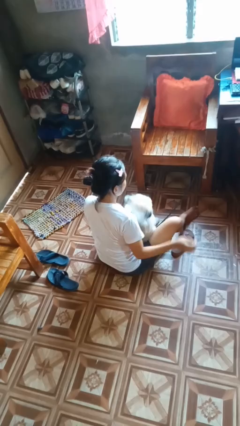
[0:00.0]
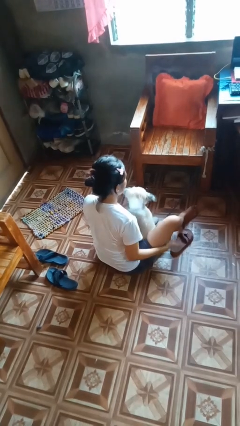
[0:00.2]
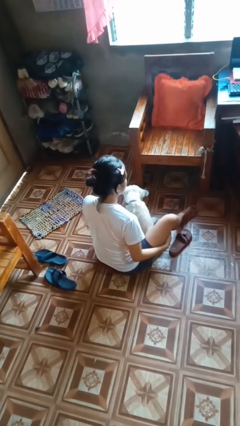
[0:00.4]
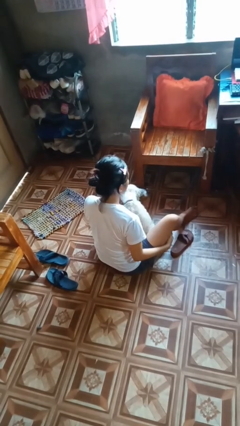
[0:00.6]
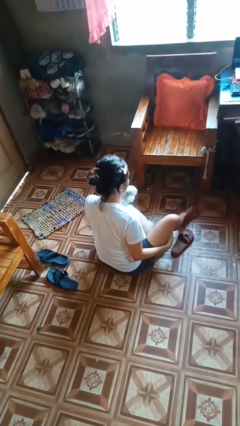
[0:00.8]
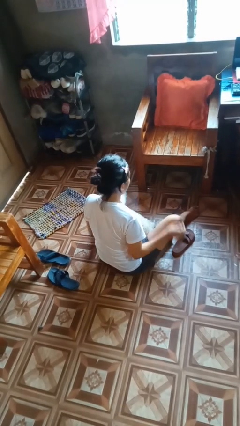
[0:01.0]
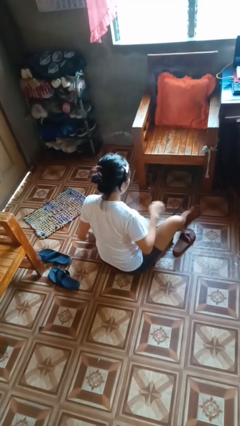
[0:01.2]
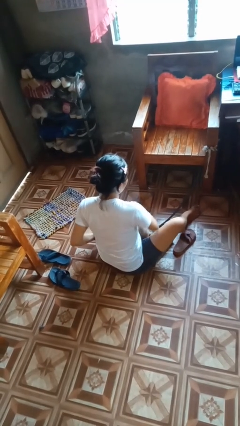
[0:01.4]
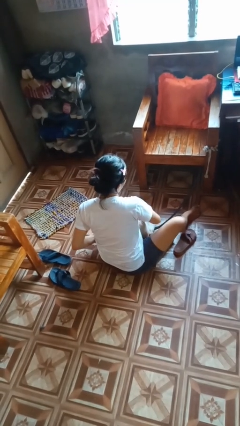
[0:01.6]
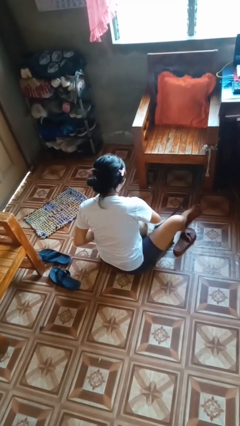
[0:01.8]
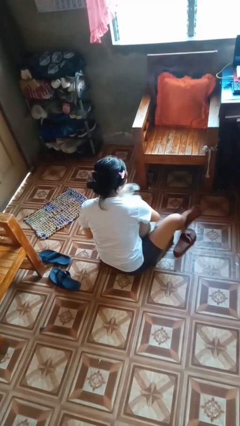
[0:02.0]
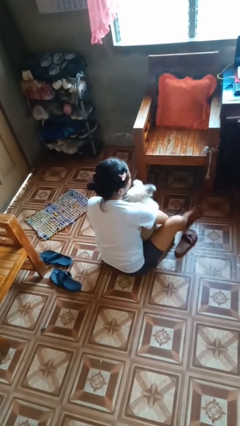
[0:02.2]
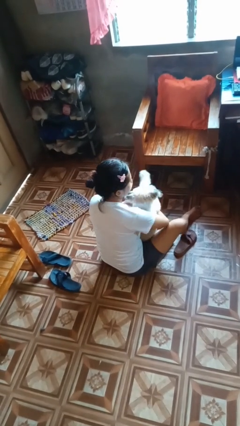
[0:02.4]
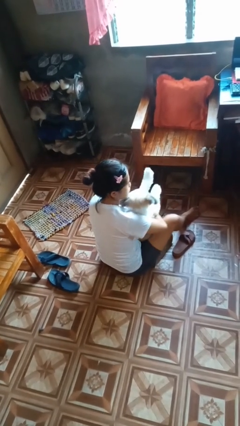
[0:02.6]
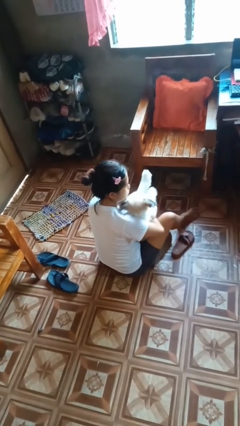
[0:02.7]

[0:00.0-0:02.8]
person hugs dog

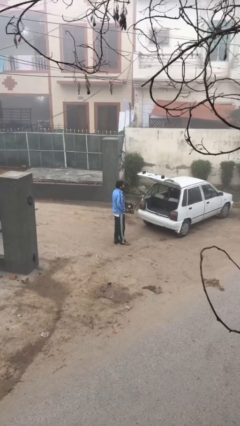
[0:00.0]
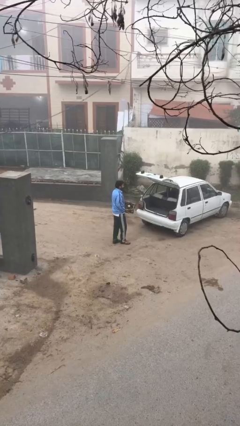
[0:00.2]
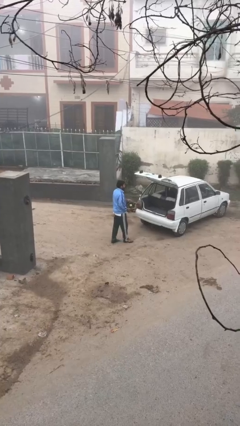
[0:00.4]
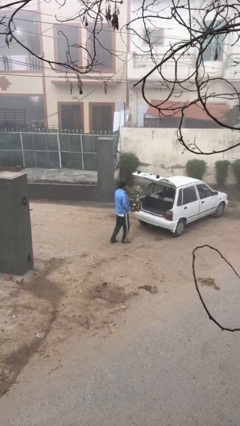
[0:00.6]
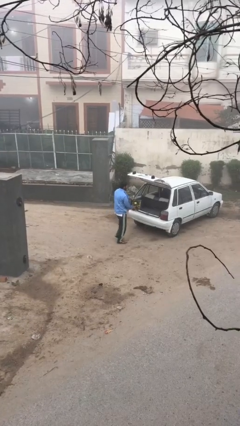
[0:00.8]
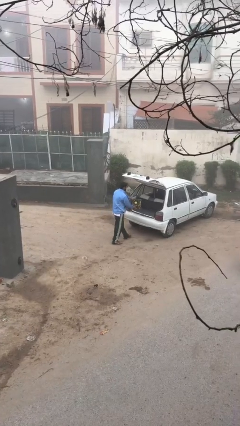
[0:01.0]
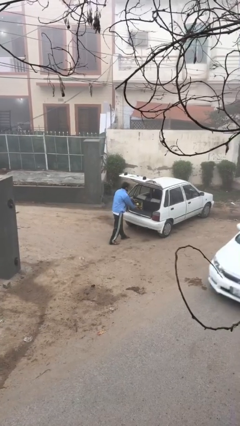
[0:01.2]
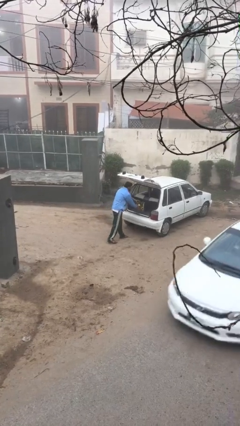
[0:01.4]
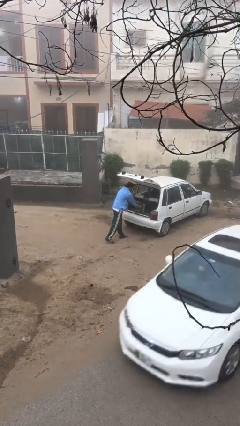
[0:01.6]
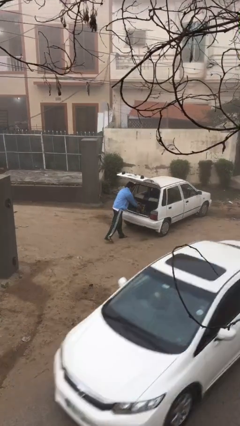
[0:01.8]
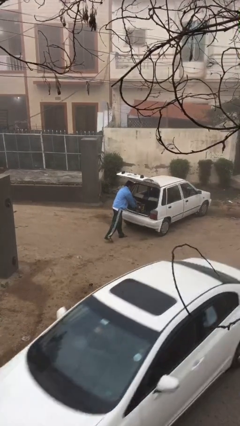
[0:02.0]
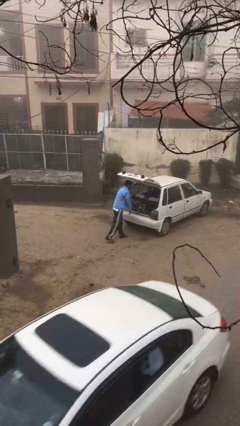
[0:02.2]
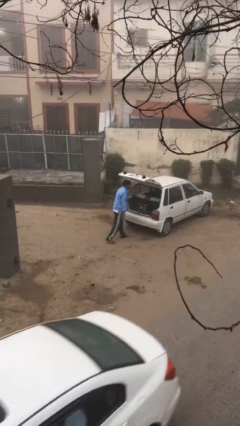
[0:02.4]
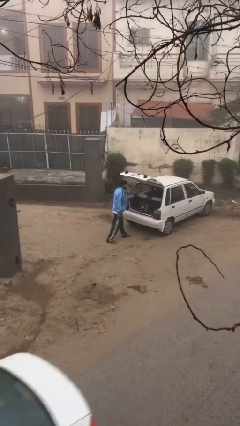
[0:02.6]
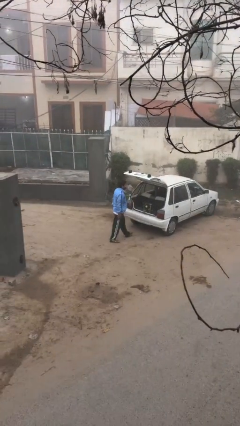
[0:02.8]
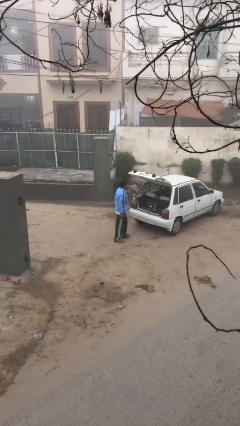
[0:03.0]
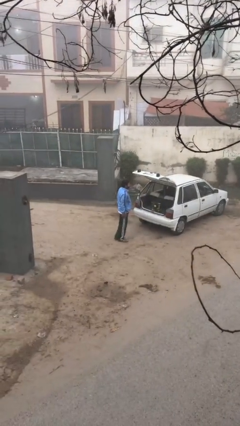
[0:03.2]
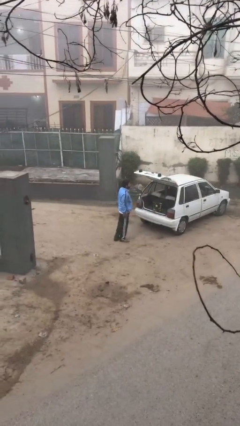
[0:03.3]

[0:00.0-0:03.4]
person loads car

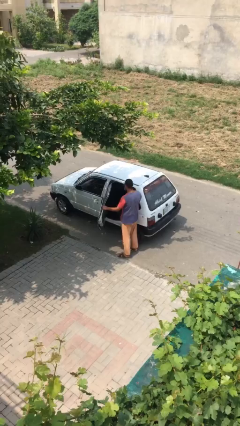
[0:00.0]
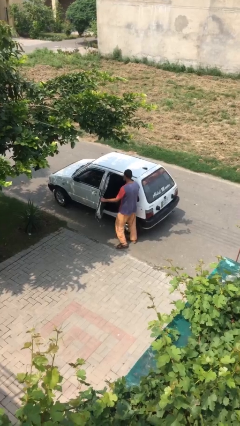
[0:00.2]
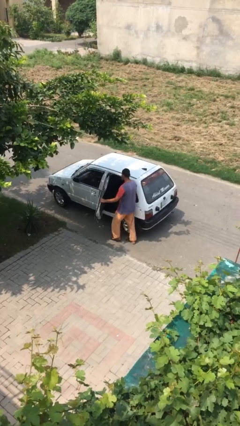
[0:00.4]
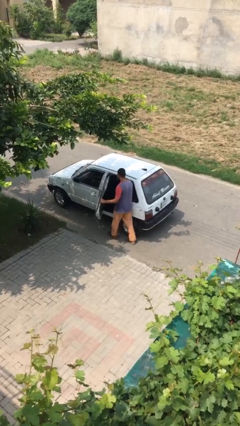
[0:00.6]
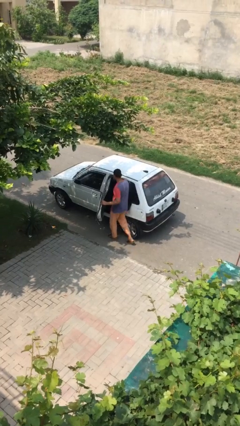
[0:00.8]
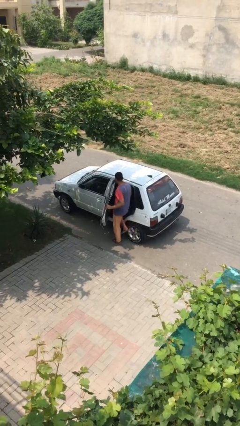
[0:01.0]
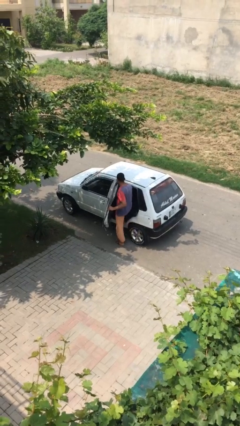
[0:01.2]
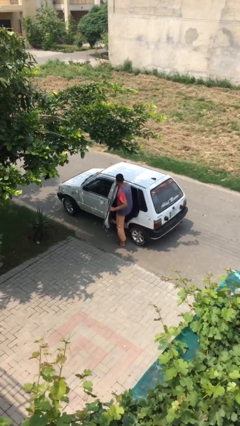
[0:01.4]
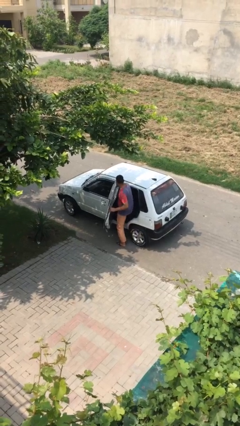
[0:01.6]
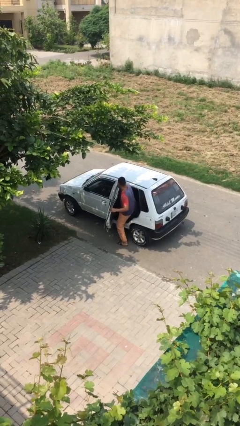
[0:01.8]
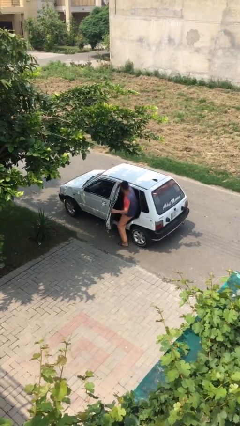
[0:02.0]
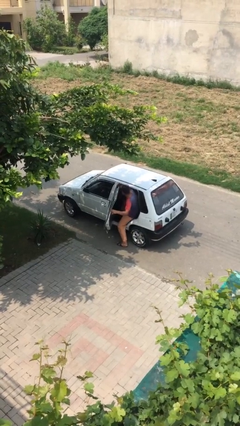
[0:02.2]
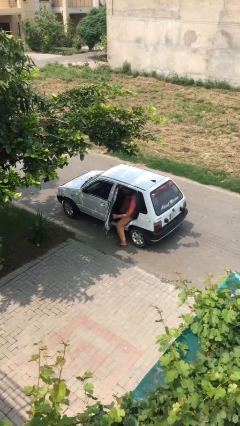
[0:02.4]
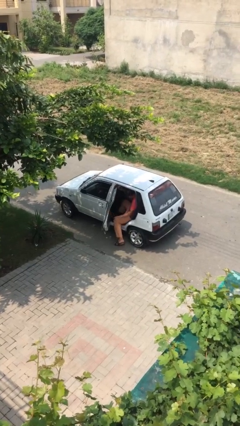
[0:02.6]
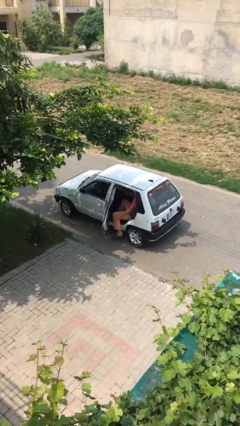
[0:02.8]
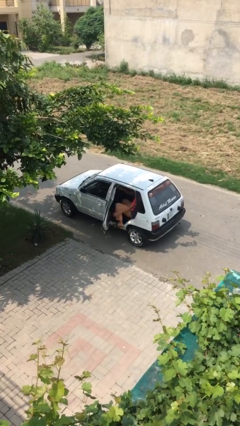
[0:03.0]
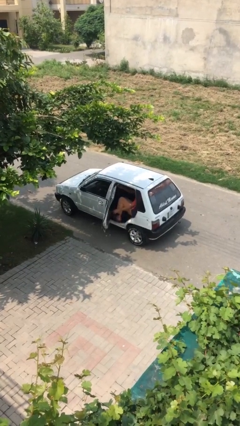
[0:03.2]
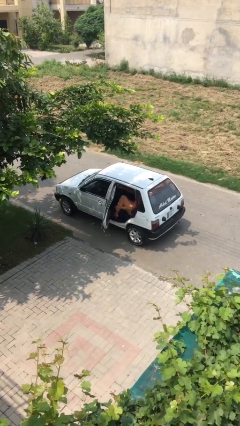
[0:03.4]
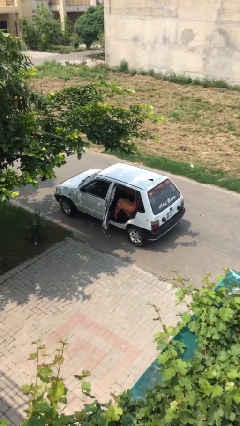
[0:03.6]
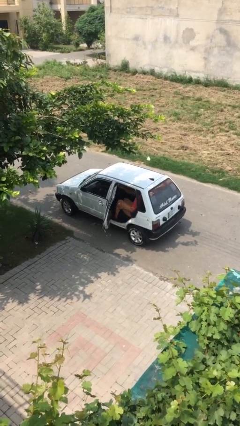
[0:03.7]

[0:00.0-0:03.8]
person enters car

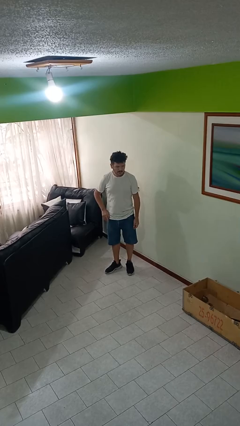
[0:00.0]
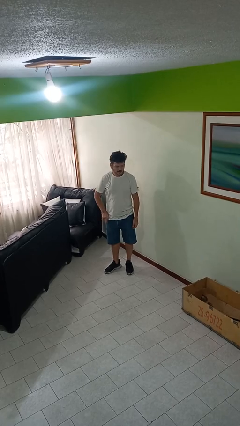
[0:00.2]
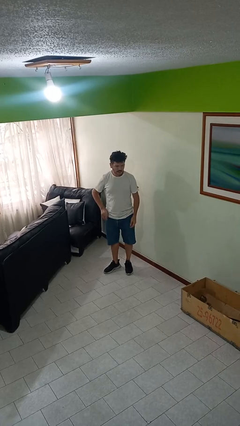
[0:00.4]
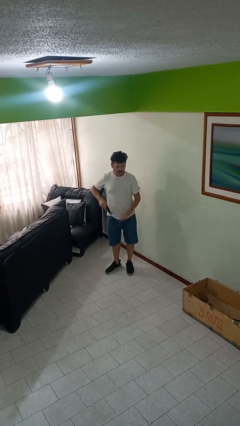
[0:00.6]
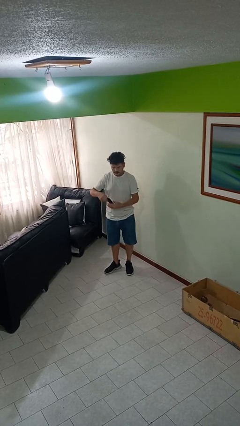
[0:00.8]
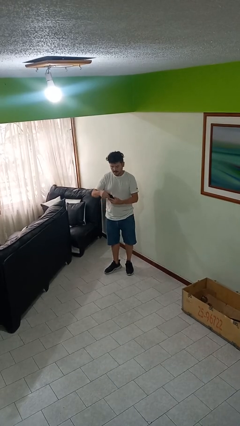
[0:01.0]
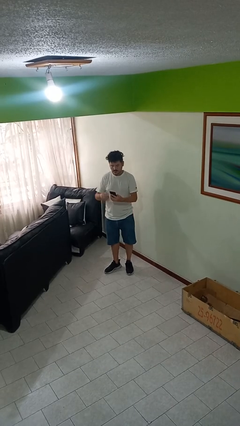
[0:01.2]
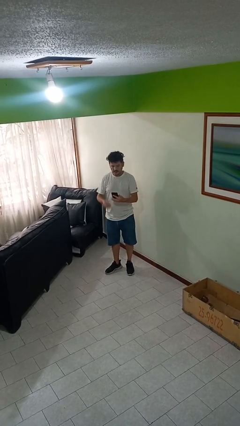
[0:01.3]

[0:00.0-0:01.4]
person takes phone from pocket

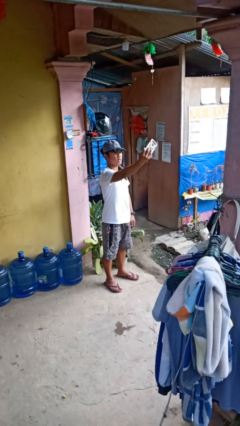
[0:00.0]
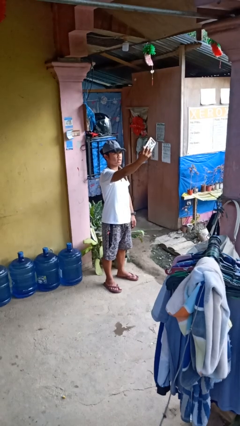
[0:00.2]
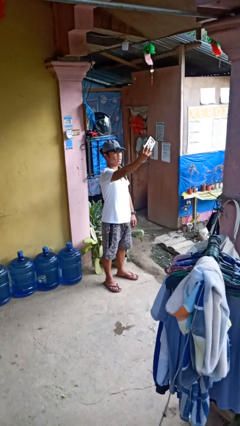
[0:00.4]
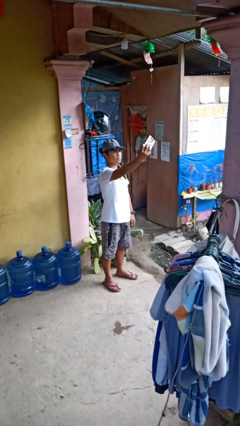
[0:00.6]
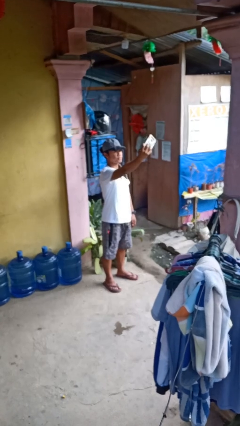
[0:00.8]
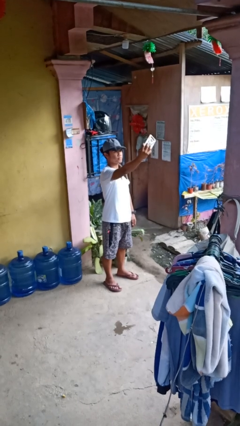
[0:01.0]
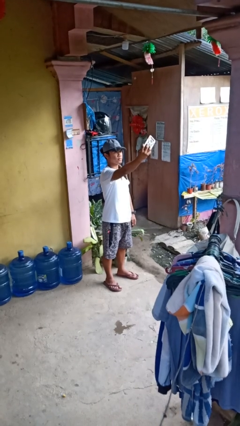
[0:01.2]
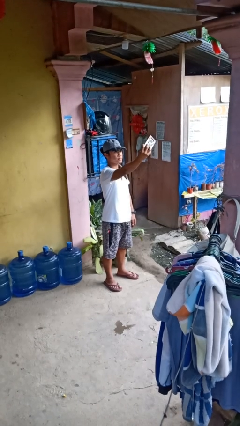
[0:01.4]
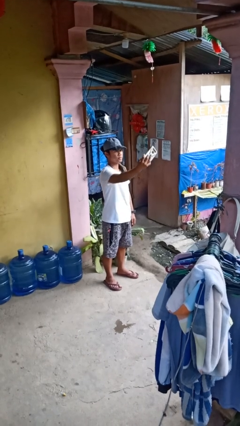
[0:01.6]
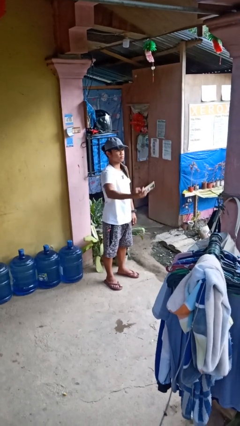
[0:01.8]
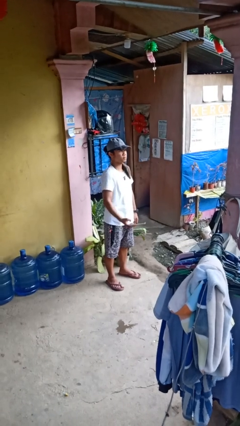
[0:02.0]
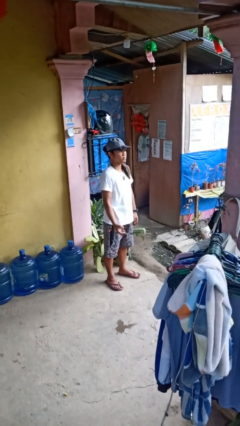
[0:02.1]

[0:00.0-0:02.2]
person takes selfie

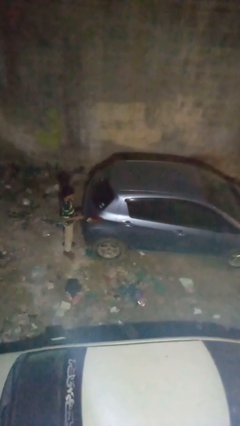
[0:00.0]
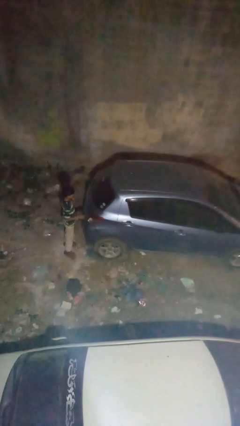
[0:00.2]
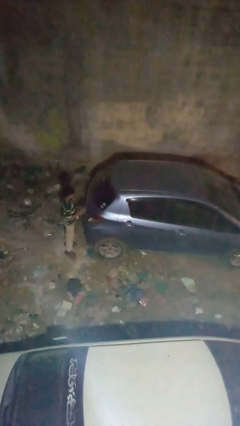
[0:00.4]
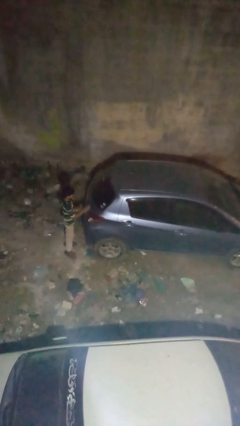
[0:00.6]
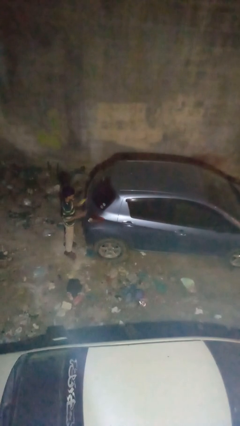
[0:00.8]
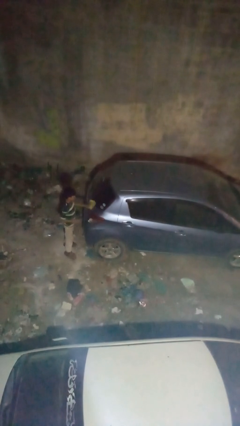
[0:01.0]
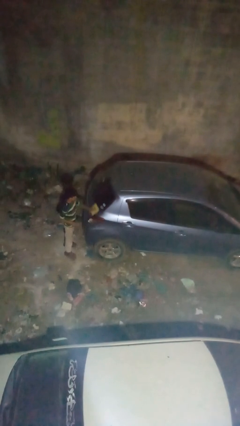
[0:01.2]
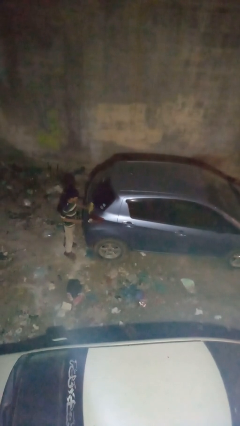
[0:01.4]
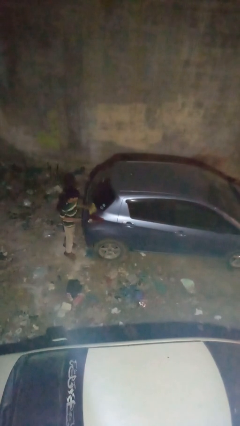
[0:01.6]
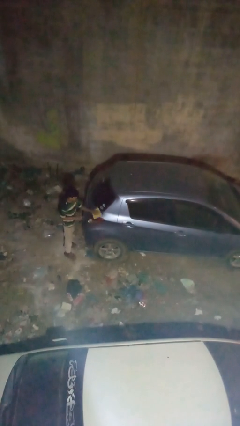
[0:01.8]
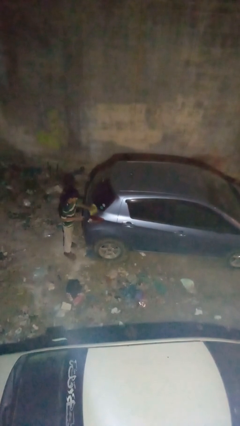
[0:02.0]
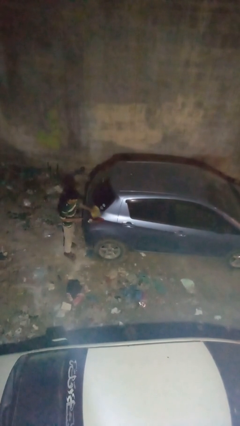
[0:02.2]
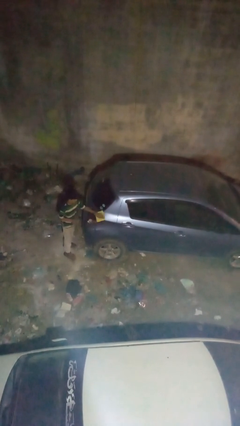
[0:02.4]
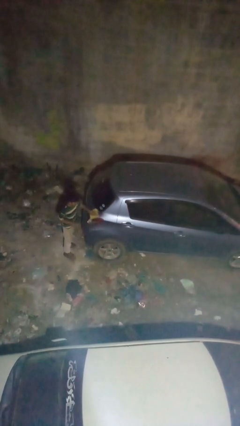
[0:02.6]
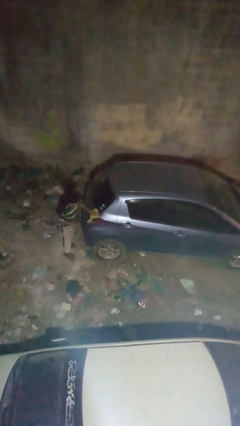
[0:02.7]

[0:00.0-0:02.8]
person polishes car with rag

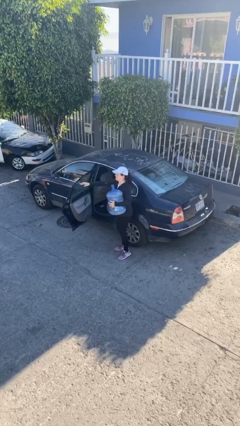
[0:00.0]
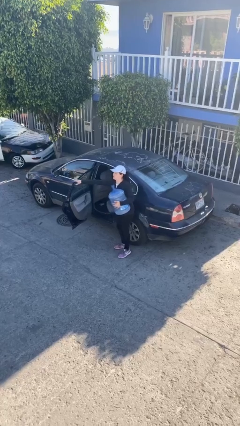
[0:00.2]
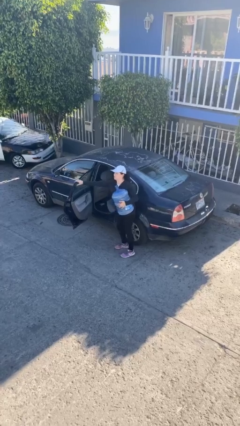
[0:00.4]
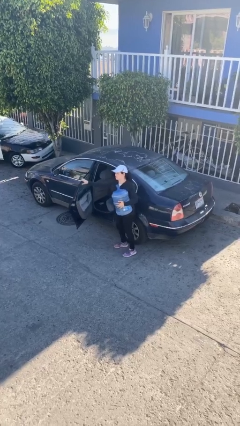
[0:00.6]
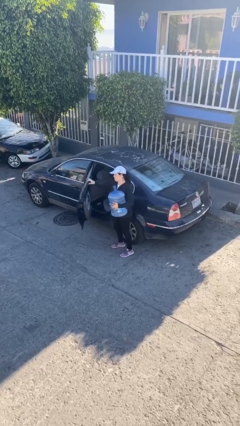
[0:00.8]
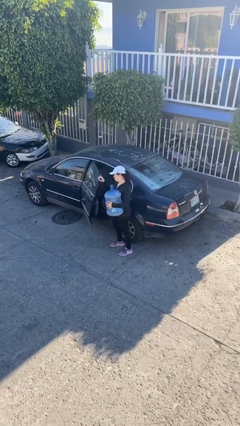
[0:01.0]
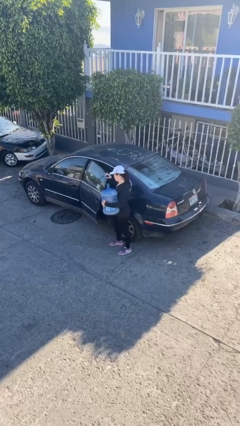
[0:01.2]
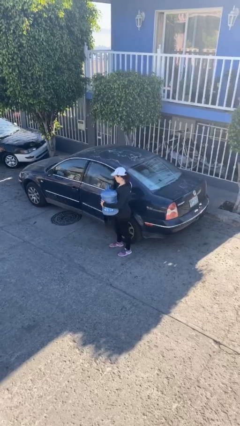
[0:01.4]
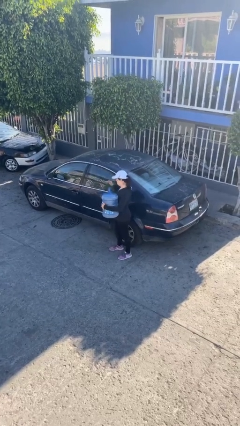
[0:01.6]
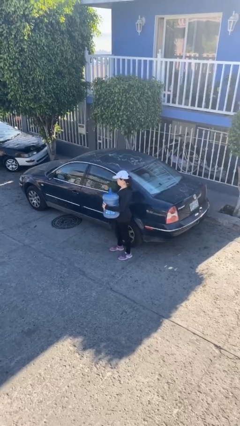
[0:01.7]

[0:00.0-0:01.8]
person closes car door
